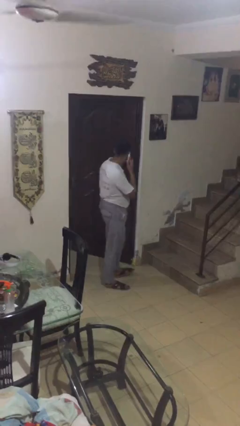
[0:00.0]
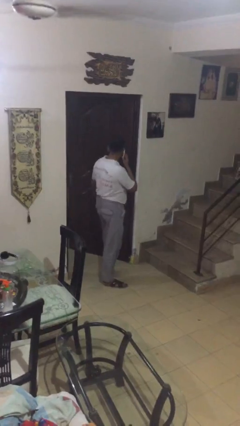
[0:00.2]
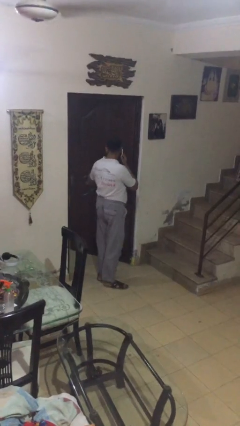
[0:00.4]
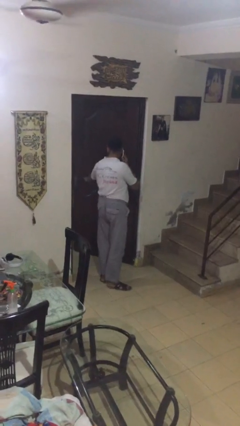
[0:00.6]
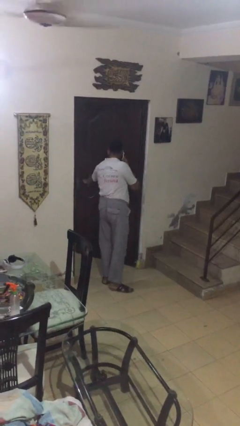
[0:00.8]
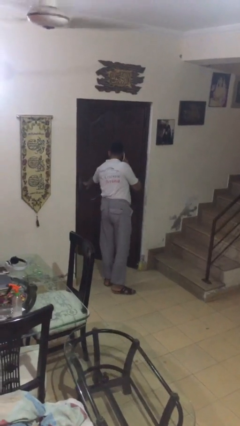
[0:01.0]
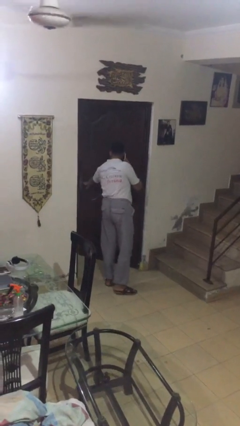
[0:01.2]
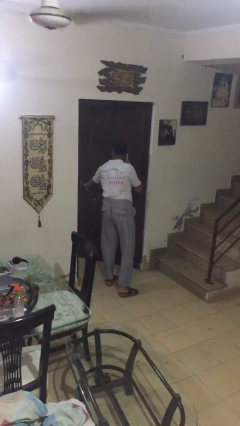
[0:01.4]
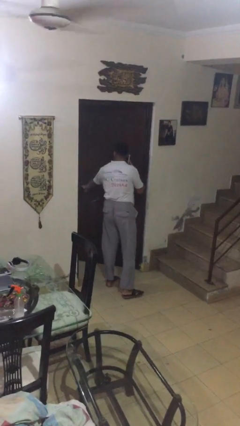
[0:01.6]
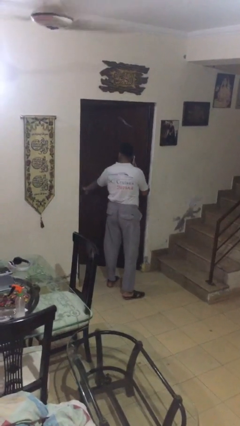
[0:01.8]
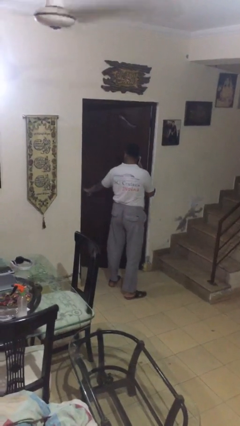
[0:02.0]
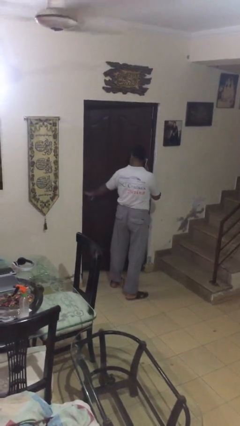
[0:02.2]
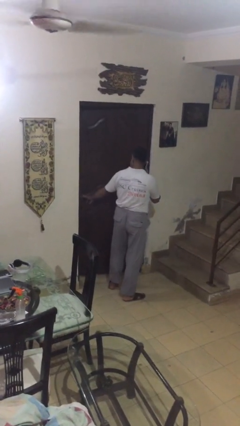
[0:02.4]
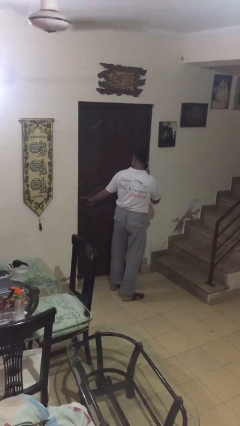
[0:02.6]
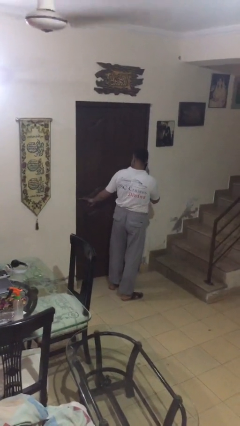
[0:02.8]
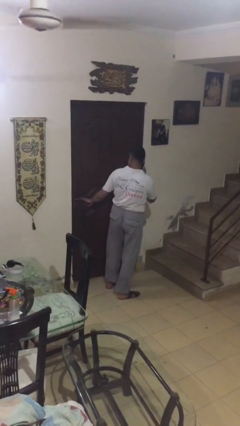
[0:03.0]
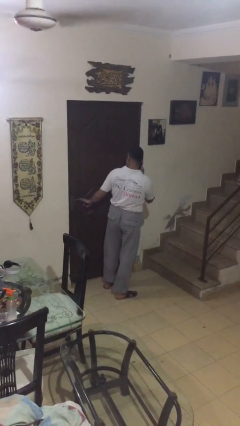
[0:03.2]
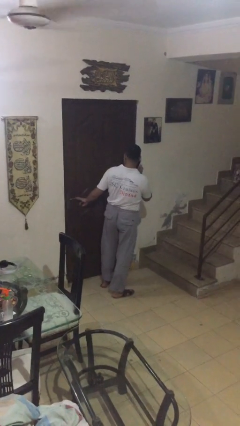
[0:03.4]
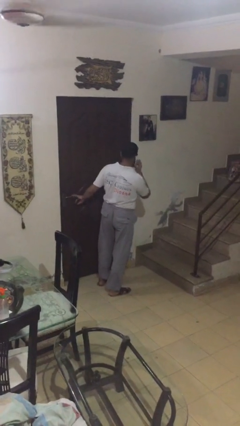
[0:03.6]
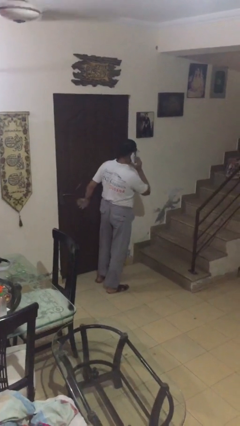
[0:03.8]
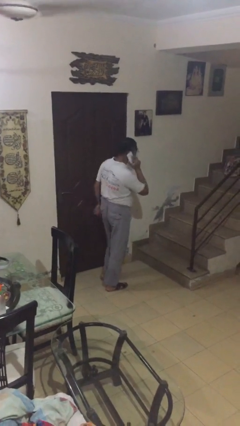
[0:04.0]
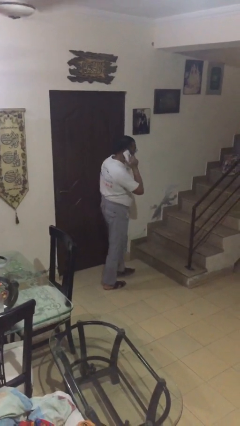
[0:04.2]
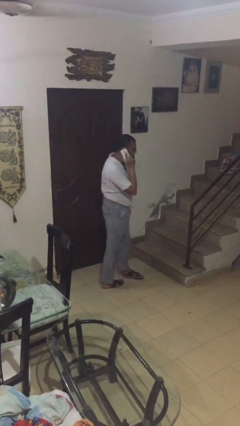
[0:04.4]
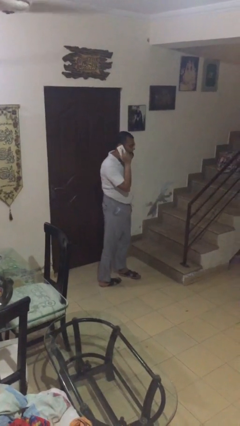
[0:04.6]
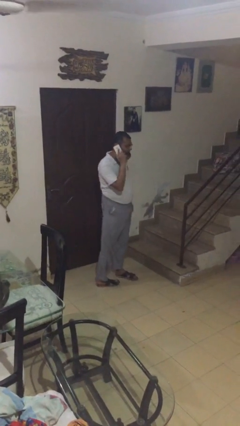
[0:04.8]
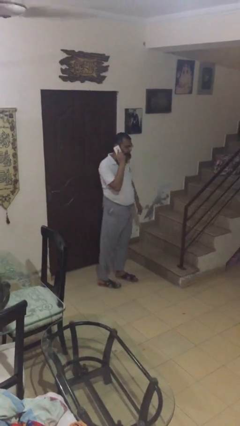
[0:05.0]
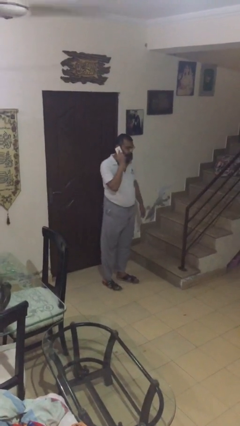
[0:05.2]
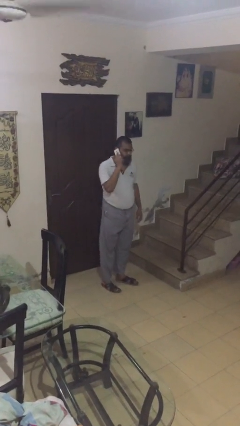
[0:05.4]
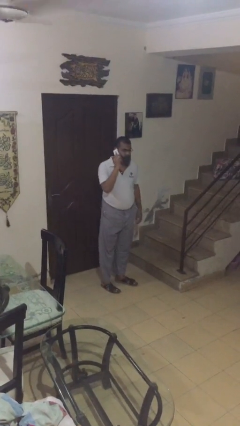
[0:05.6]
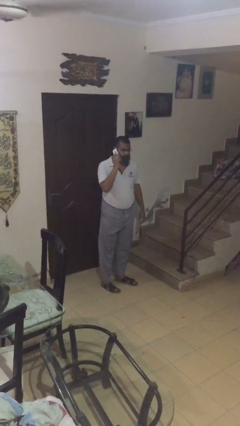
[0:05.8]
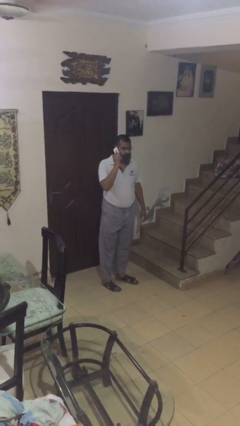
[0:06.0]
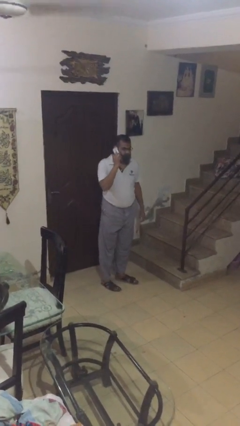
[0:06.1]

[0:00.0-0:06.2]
person closes facility door

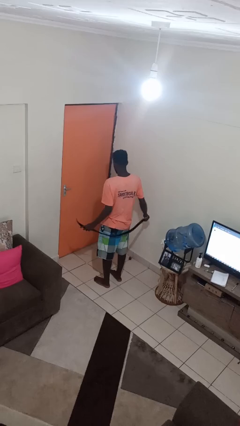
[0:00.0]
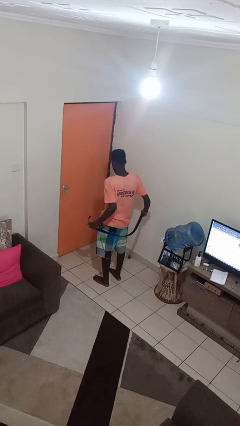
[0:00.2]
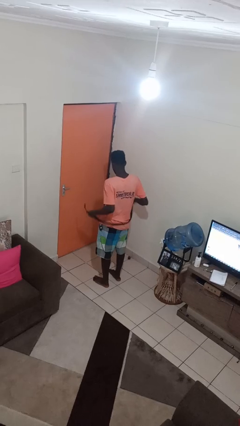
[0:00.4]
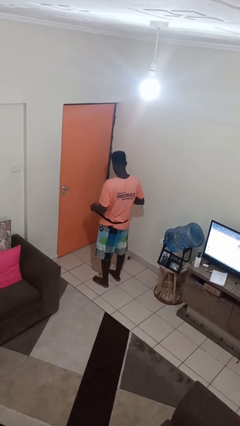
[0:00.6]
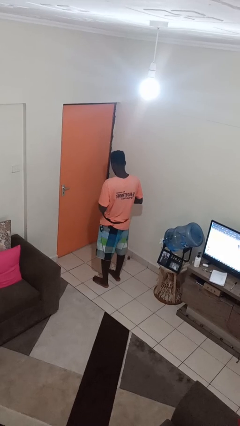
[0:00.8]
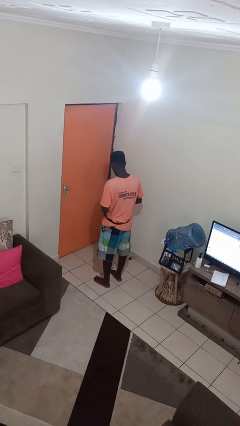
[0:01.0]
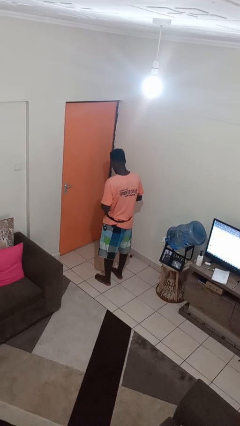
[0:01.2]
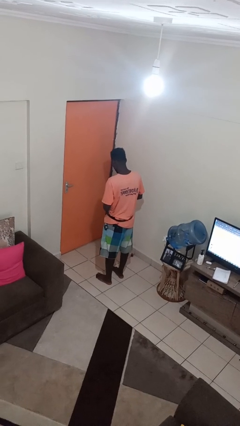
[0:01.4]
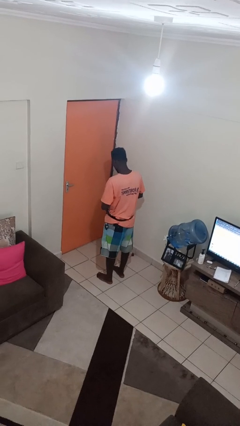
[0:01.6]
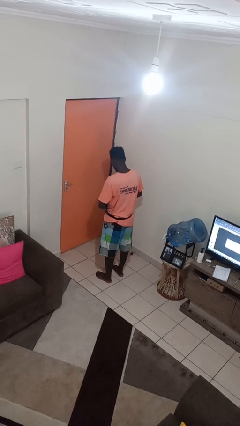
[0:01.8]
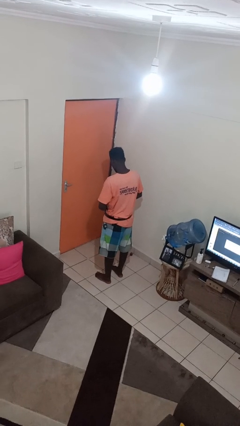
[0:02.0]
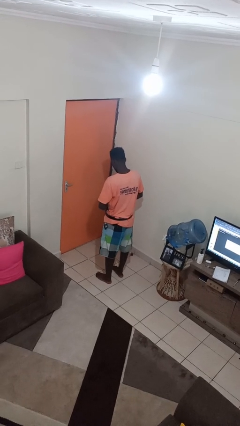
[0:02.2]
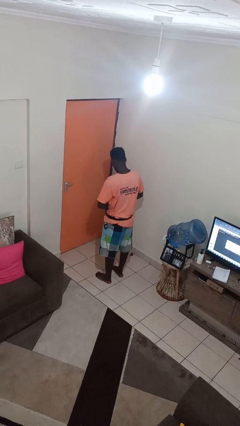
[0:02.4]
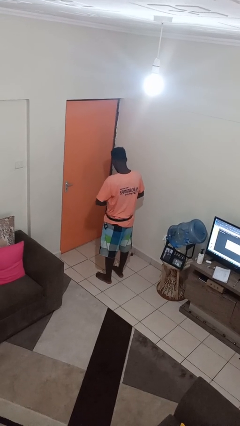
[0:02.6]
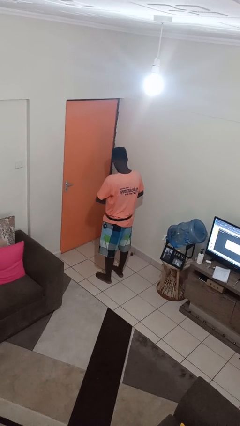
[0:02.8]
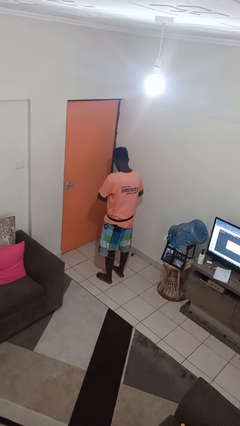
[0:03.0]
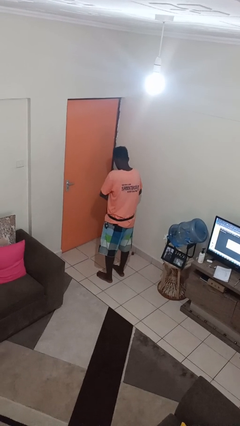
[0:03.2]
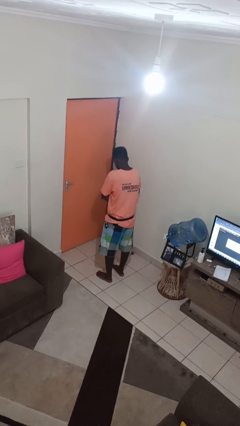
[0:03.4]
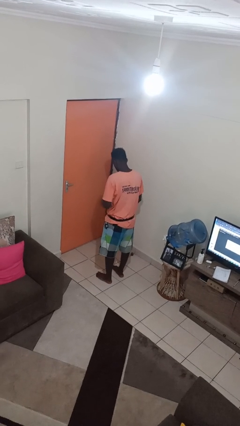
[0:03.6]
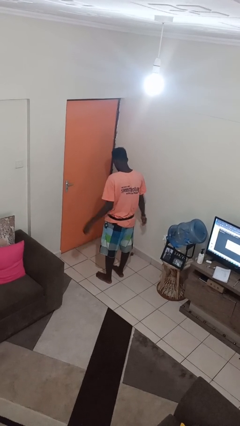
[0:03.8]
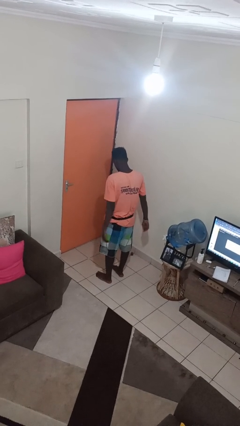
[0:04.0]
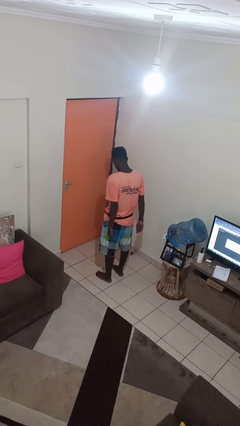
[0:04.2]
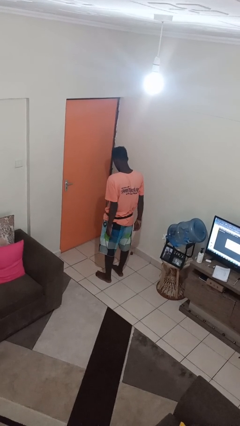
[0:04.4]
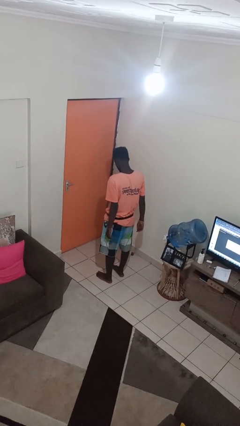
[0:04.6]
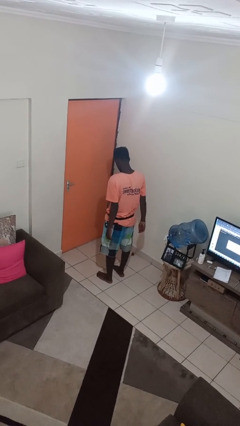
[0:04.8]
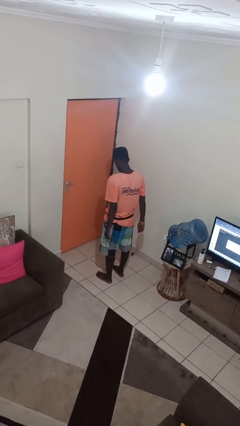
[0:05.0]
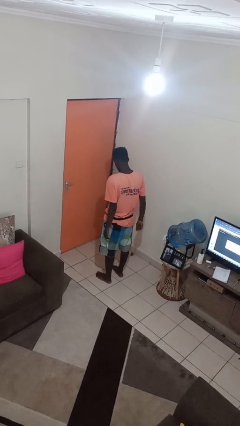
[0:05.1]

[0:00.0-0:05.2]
person puts on belt

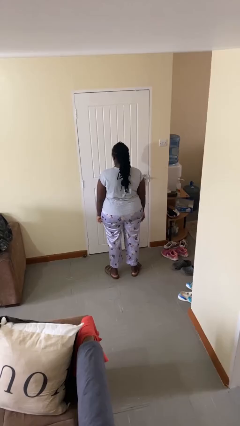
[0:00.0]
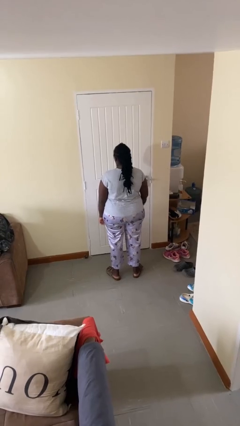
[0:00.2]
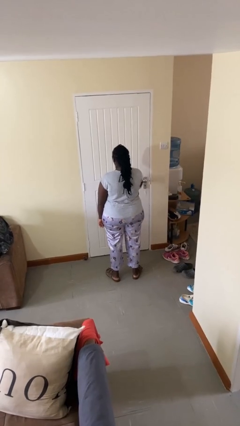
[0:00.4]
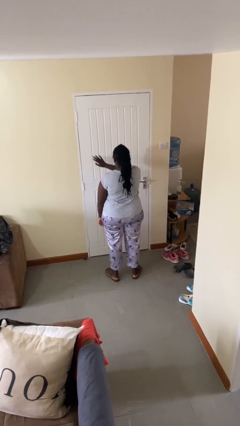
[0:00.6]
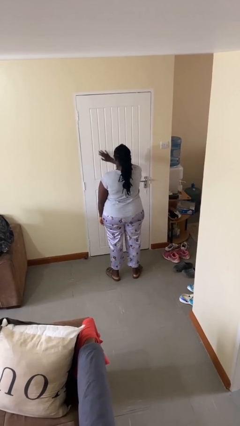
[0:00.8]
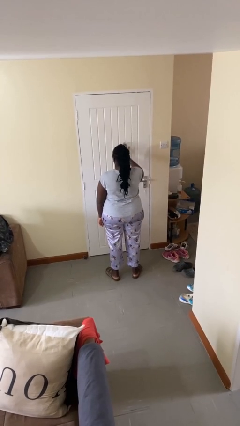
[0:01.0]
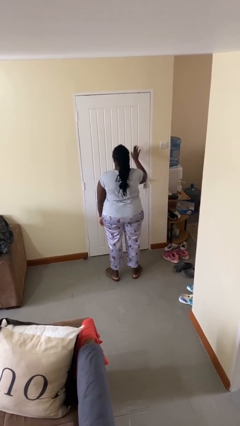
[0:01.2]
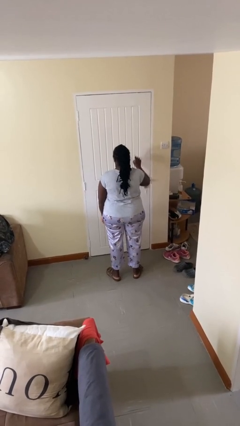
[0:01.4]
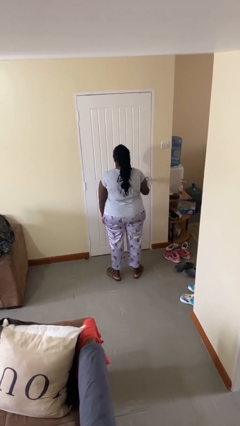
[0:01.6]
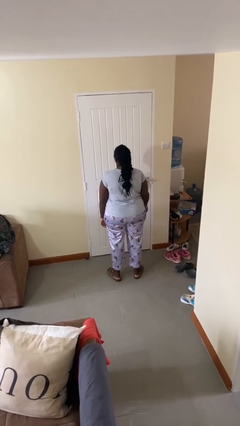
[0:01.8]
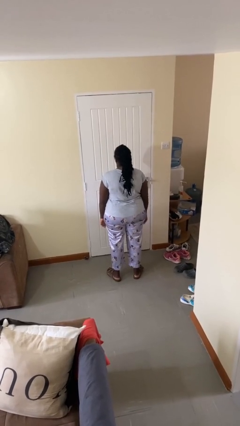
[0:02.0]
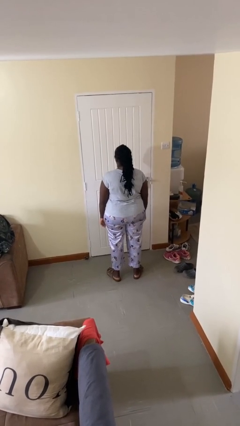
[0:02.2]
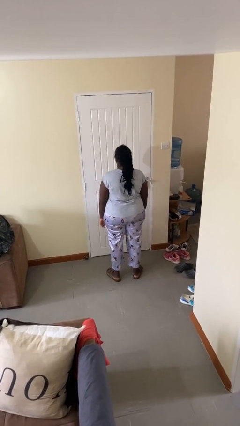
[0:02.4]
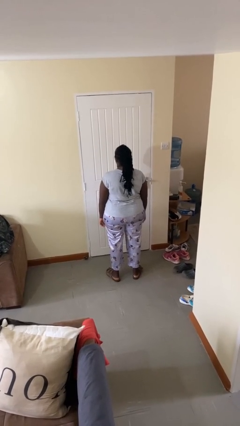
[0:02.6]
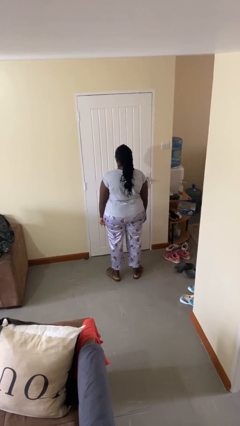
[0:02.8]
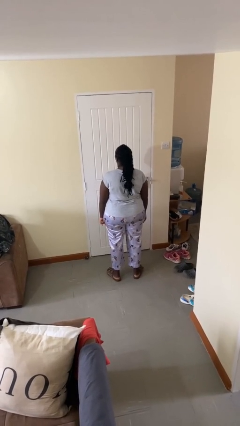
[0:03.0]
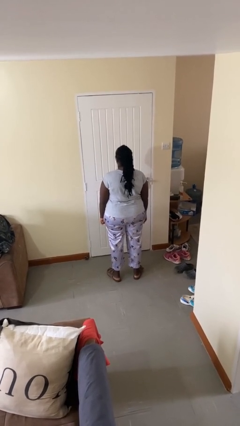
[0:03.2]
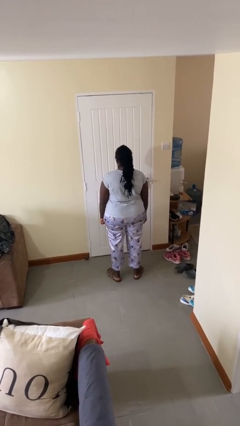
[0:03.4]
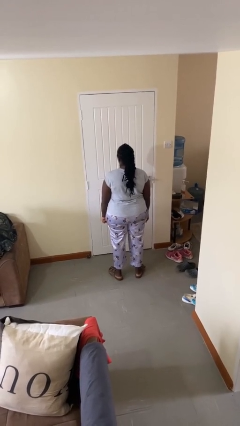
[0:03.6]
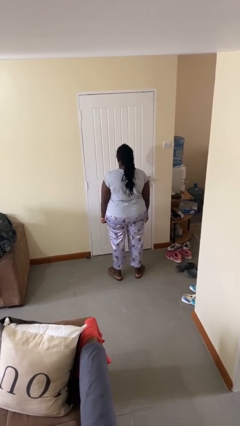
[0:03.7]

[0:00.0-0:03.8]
person gestures swipe right

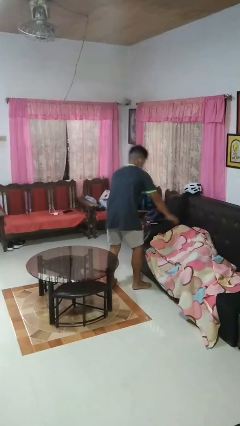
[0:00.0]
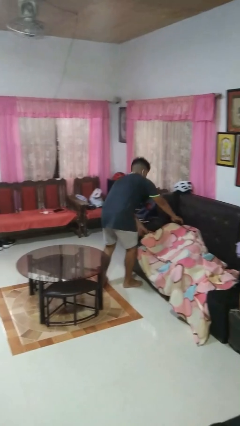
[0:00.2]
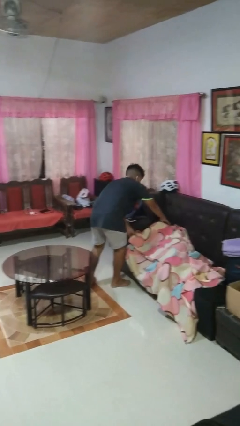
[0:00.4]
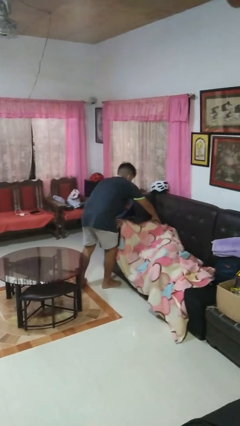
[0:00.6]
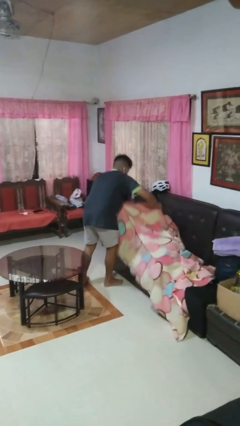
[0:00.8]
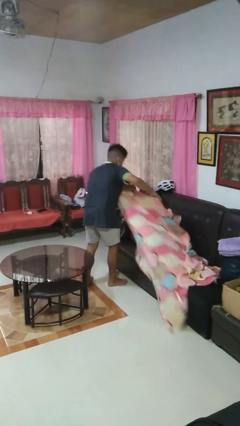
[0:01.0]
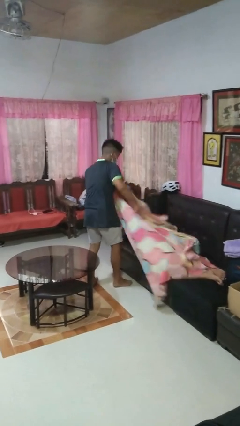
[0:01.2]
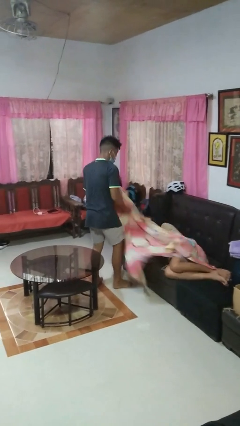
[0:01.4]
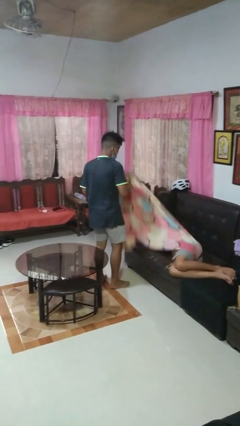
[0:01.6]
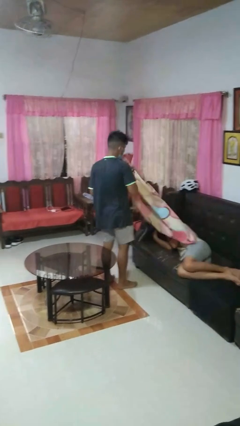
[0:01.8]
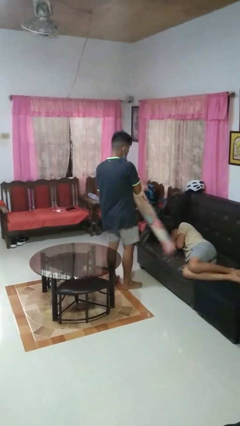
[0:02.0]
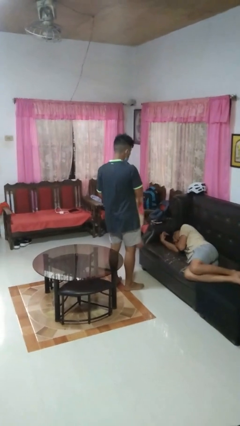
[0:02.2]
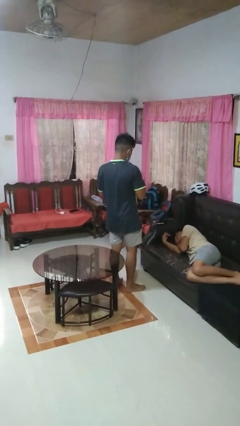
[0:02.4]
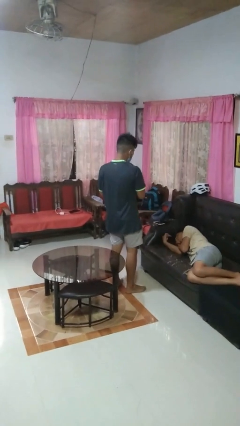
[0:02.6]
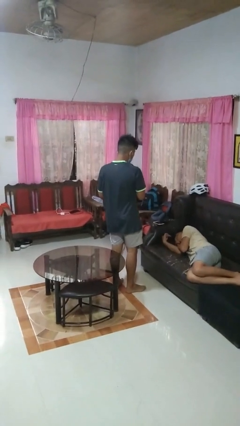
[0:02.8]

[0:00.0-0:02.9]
person uncovers friend with blanket
